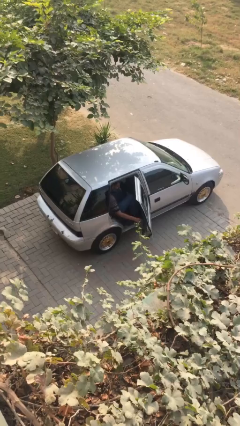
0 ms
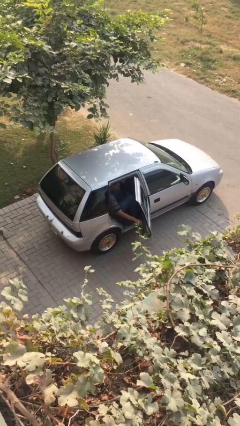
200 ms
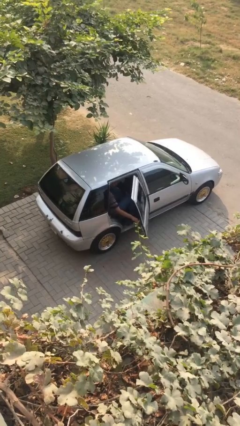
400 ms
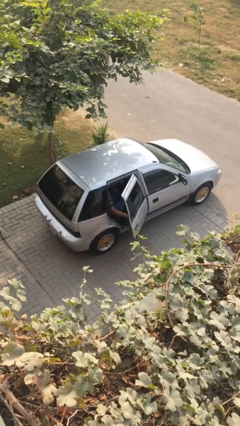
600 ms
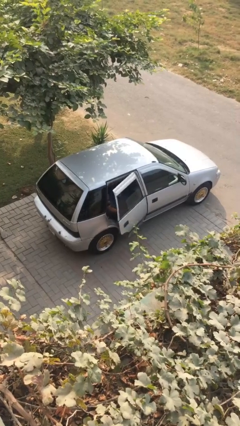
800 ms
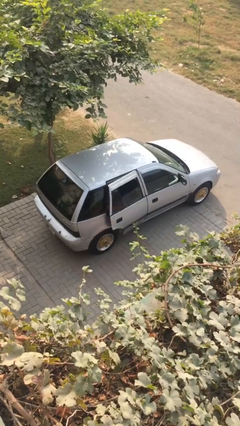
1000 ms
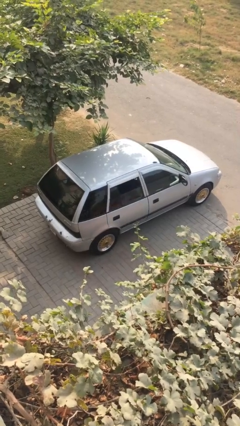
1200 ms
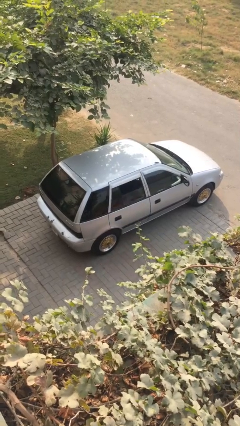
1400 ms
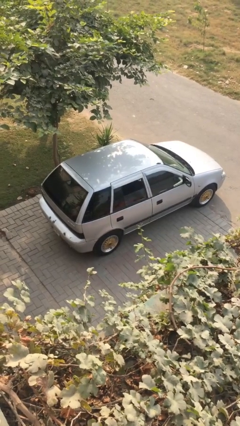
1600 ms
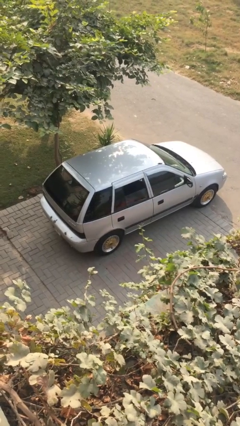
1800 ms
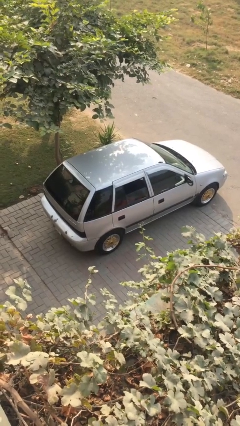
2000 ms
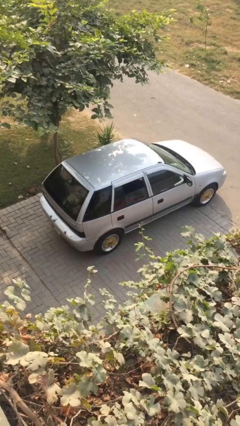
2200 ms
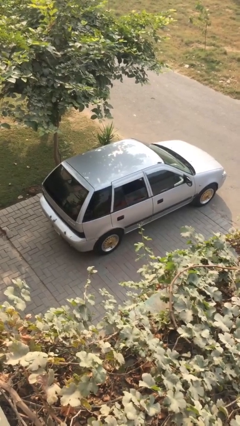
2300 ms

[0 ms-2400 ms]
person closes car door

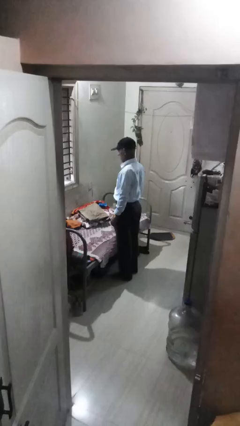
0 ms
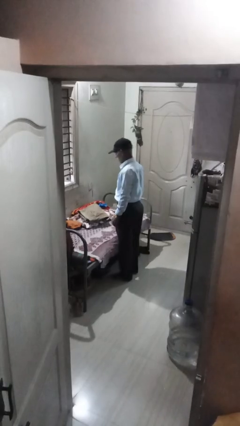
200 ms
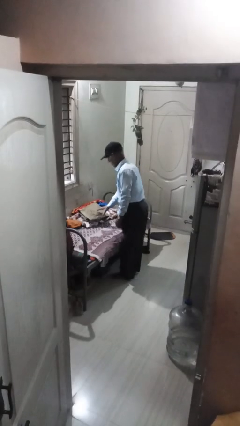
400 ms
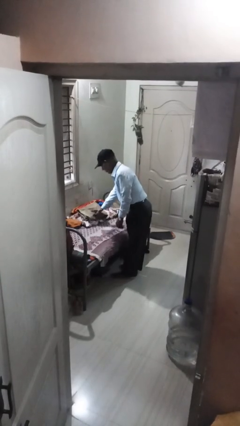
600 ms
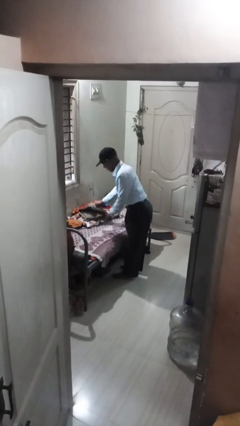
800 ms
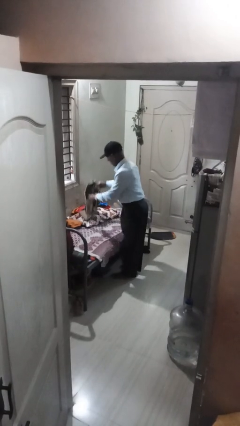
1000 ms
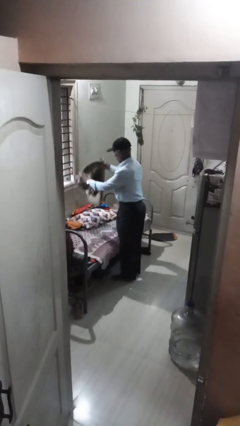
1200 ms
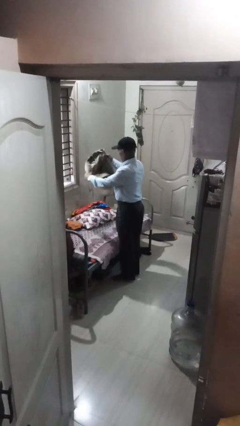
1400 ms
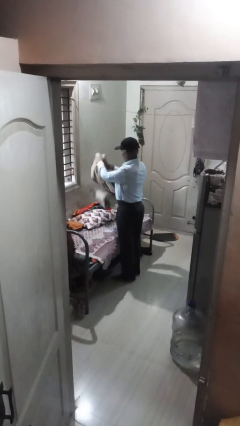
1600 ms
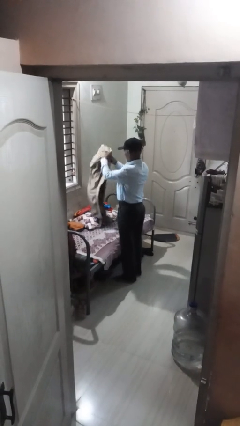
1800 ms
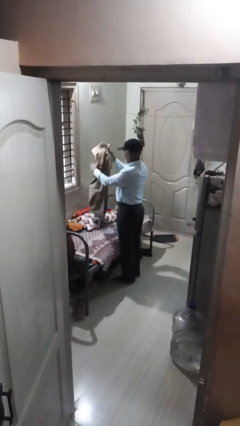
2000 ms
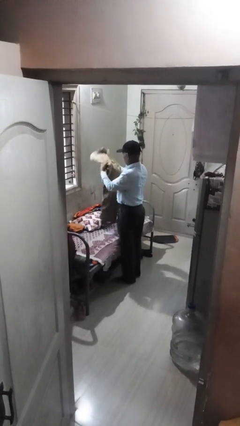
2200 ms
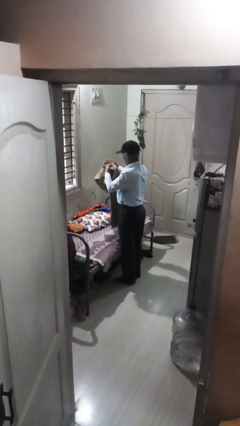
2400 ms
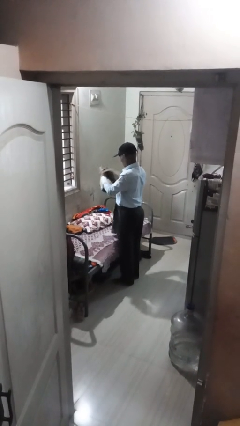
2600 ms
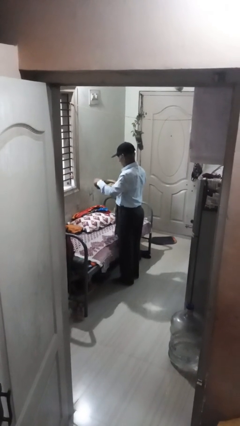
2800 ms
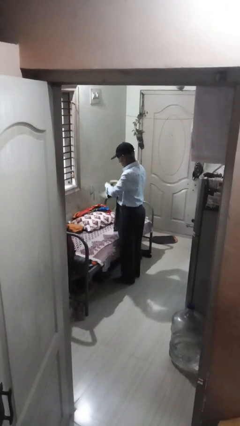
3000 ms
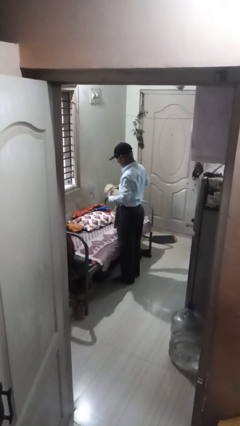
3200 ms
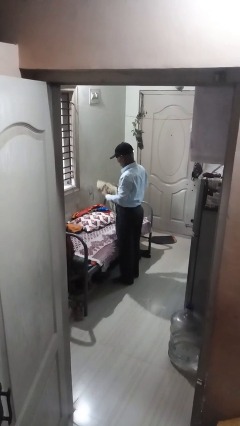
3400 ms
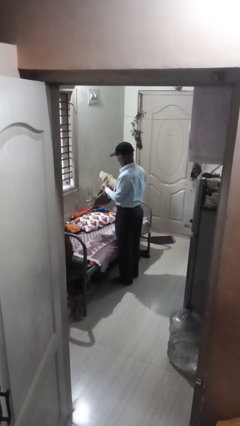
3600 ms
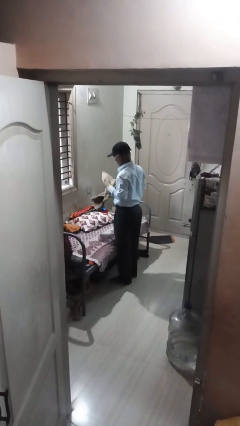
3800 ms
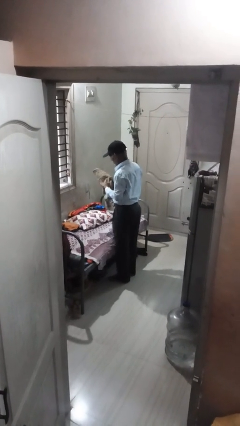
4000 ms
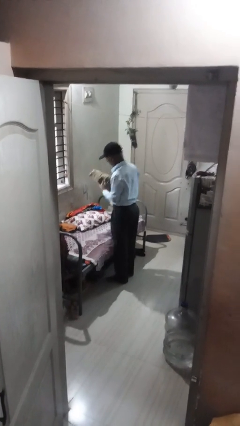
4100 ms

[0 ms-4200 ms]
person folds pants

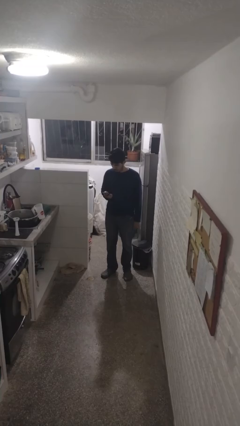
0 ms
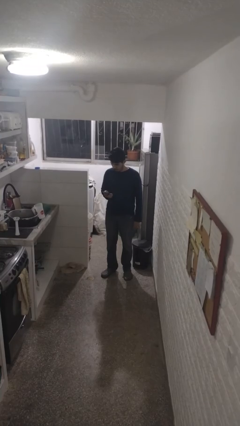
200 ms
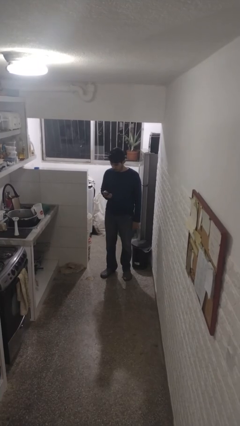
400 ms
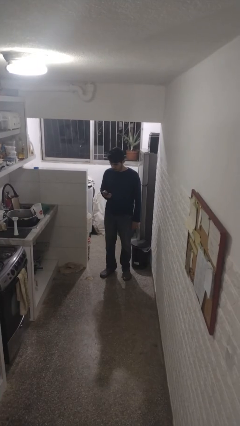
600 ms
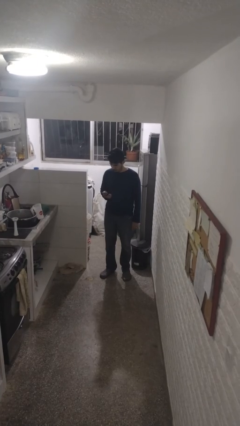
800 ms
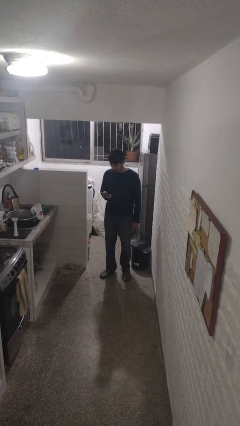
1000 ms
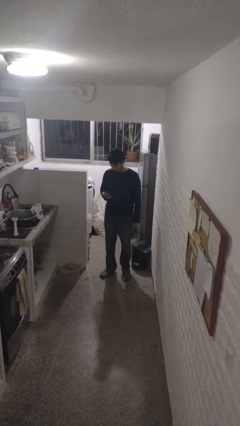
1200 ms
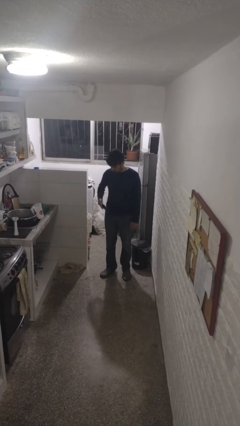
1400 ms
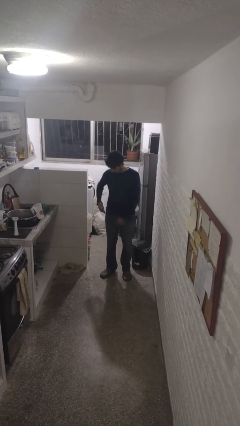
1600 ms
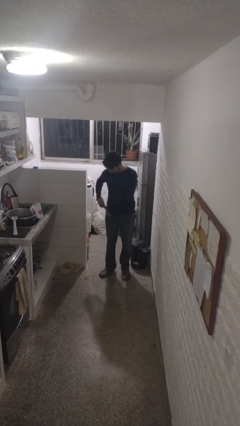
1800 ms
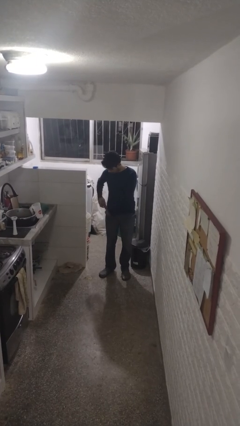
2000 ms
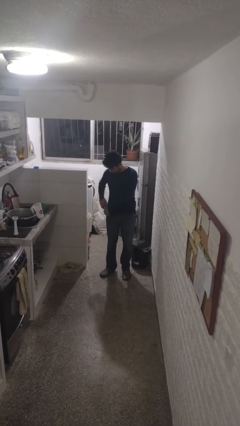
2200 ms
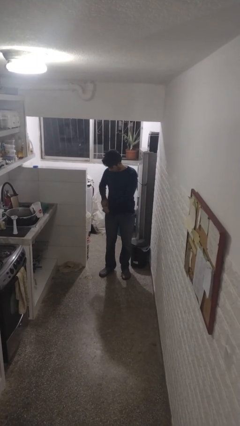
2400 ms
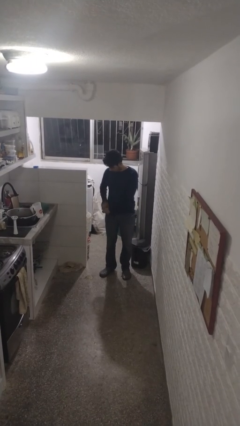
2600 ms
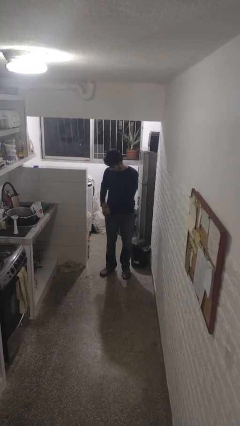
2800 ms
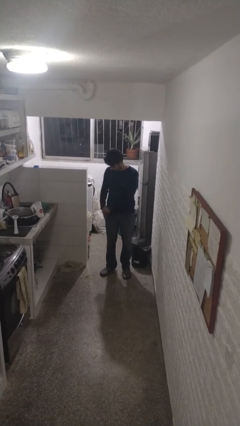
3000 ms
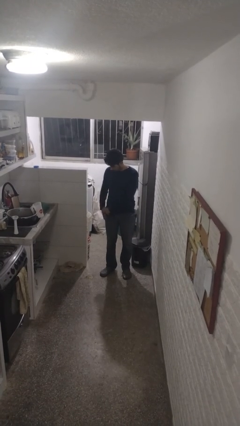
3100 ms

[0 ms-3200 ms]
person puts phone into pocket

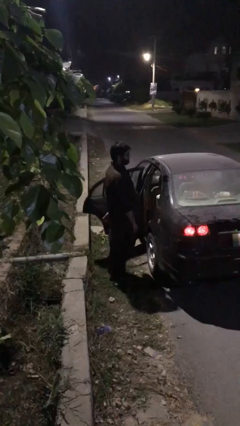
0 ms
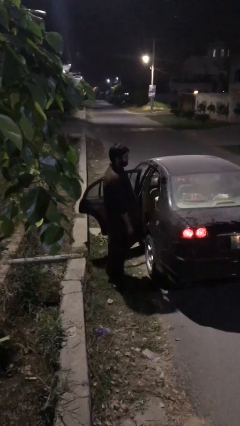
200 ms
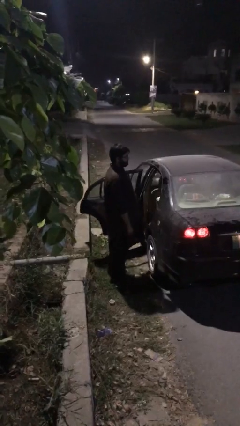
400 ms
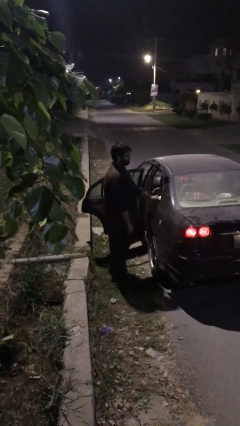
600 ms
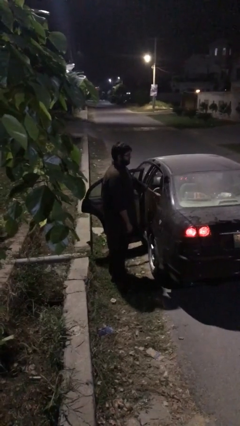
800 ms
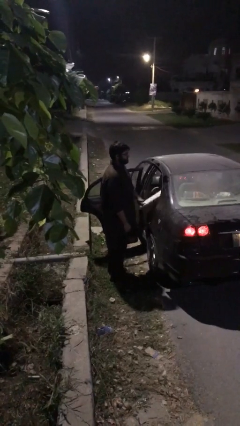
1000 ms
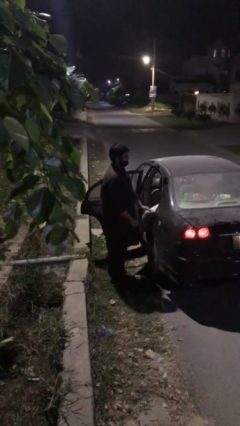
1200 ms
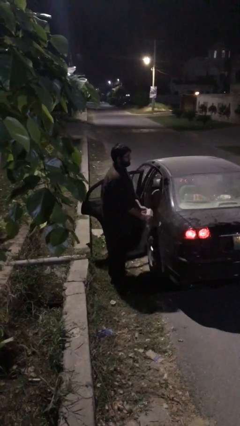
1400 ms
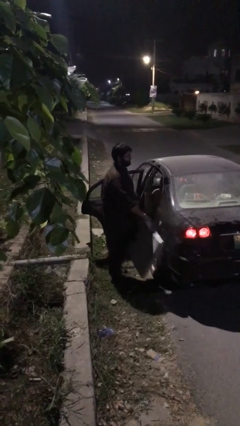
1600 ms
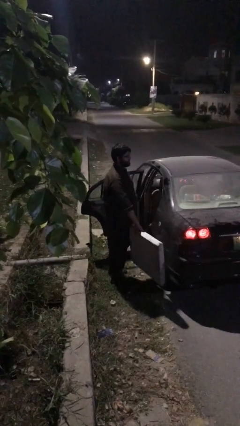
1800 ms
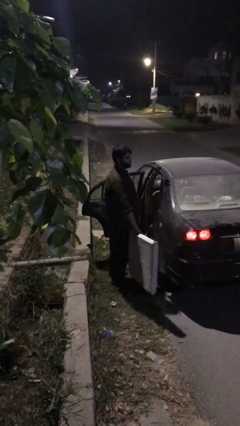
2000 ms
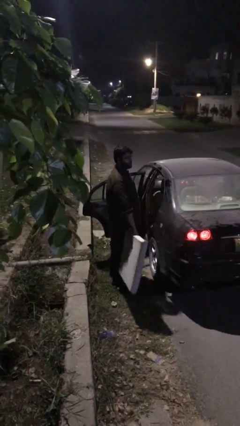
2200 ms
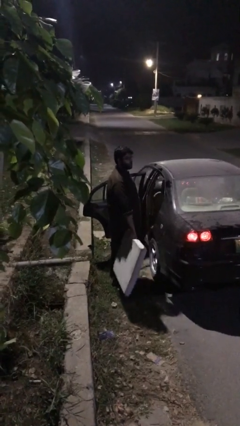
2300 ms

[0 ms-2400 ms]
person unloads car

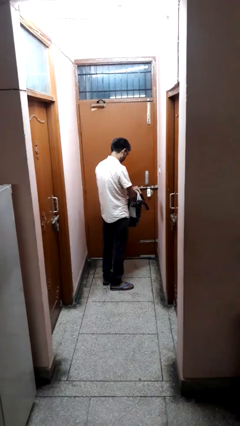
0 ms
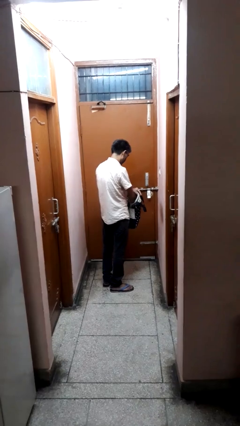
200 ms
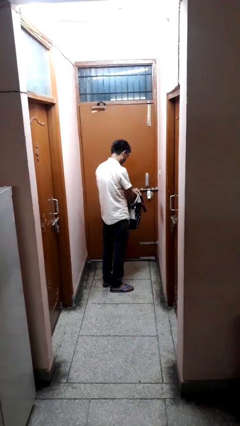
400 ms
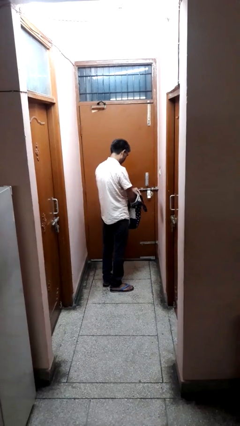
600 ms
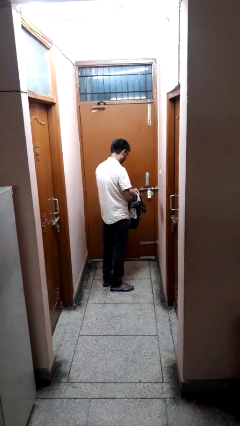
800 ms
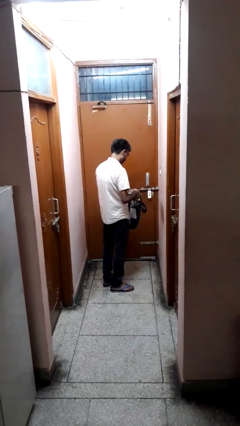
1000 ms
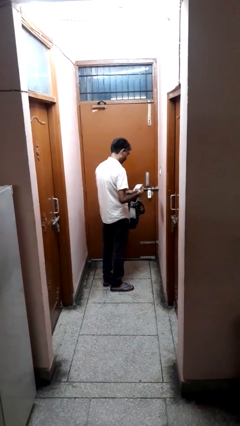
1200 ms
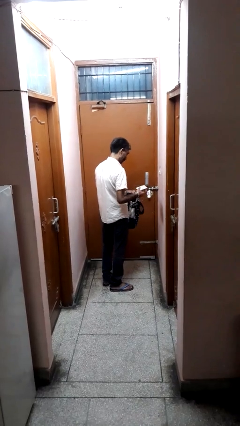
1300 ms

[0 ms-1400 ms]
person takes object from bag

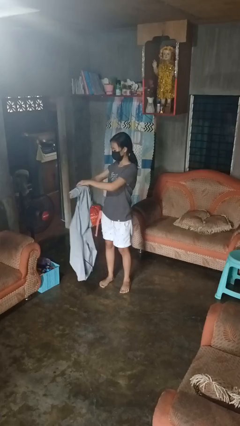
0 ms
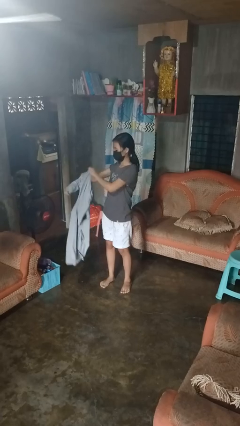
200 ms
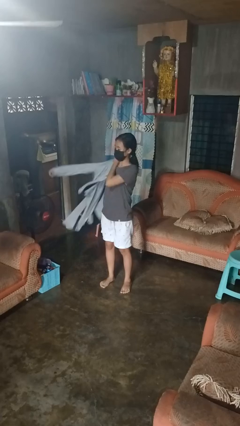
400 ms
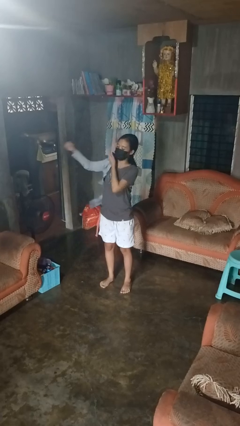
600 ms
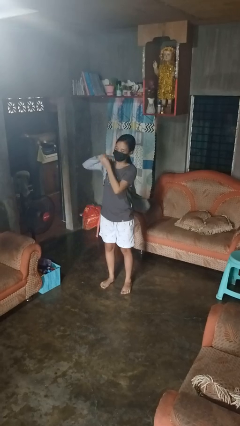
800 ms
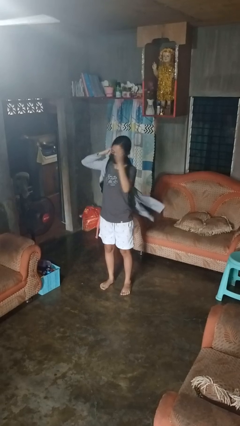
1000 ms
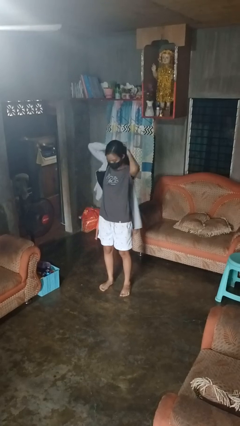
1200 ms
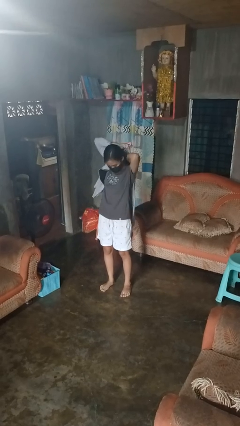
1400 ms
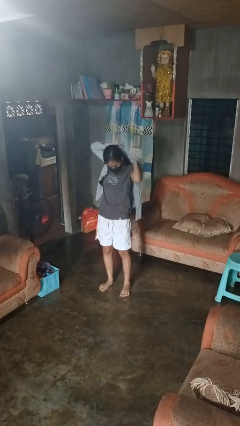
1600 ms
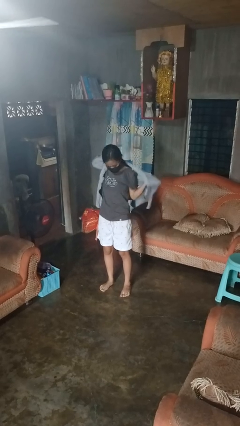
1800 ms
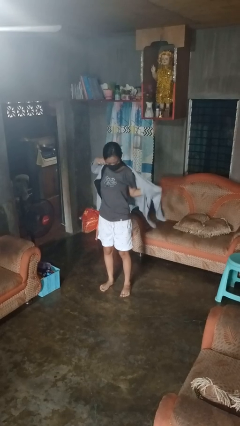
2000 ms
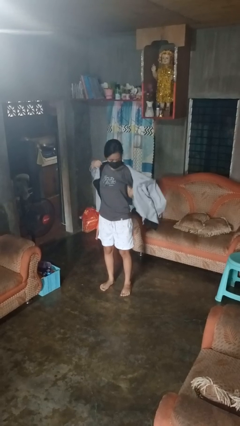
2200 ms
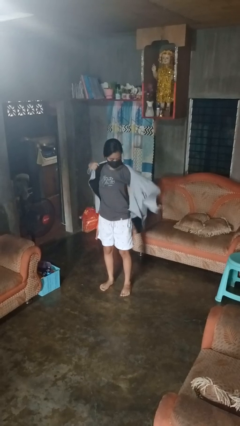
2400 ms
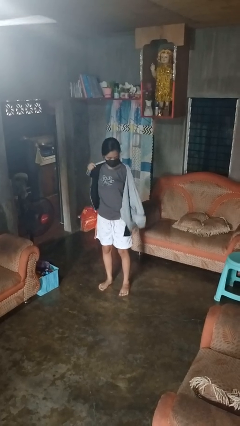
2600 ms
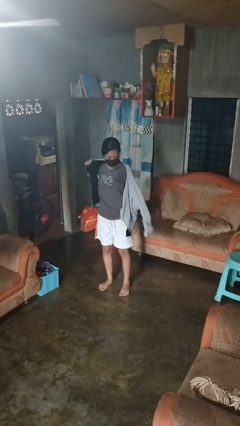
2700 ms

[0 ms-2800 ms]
person puts on jacket
